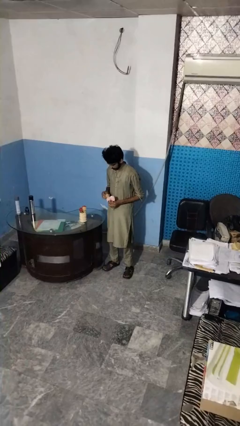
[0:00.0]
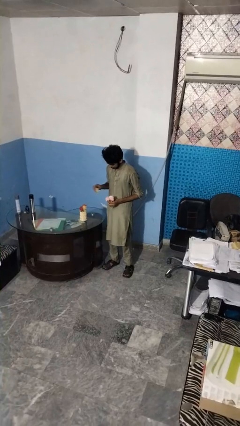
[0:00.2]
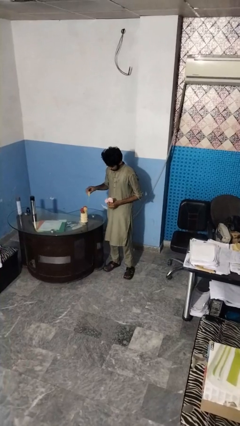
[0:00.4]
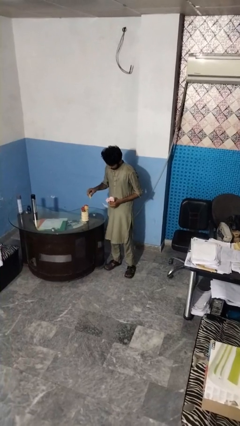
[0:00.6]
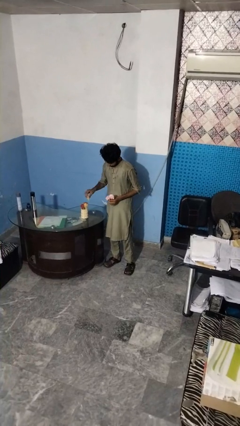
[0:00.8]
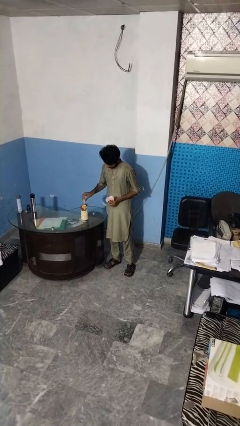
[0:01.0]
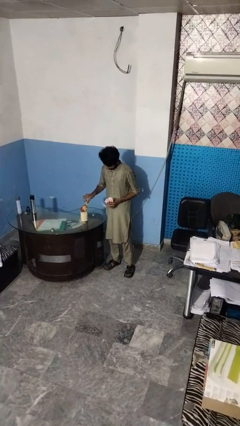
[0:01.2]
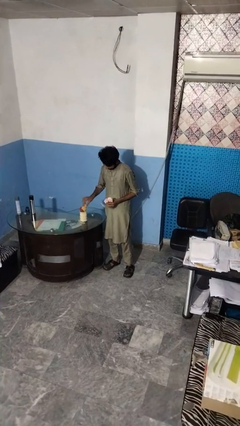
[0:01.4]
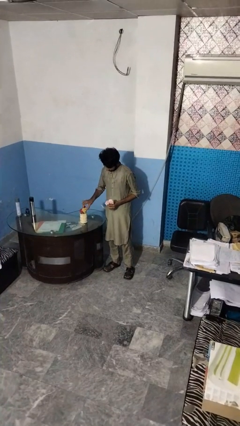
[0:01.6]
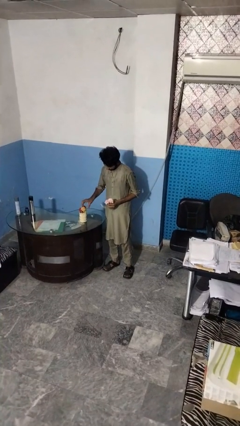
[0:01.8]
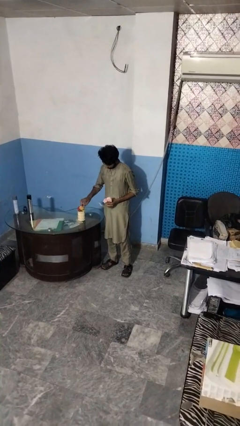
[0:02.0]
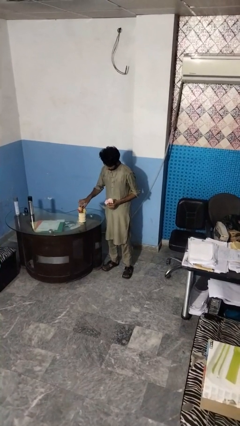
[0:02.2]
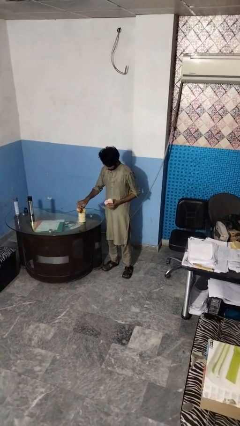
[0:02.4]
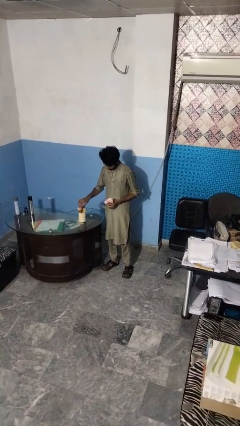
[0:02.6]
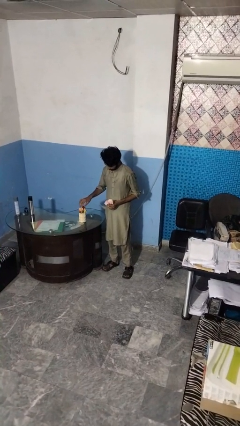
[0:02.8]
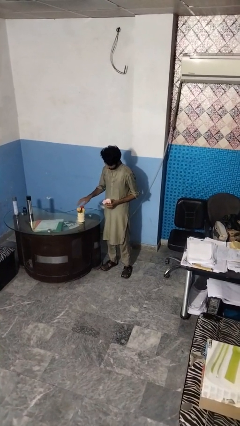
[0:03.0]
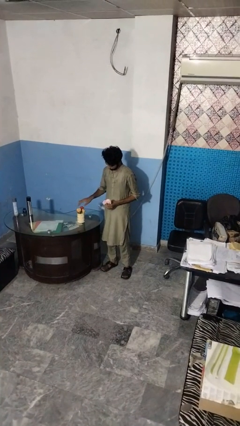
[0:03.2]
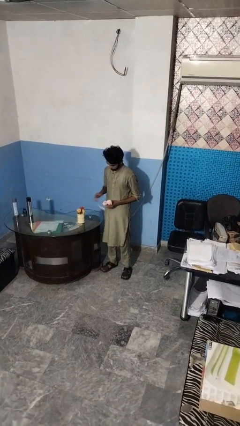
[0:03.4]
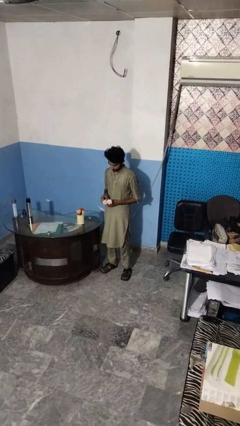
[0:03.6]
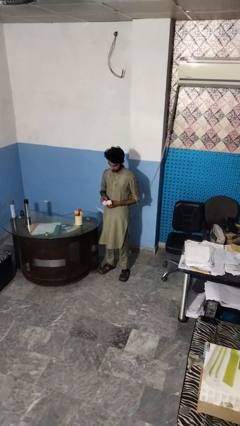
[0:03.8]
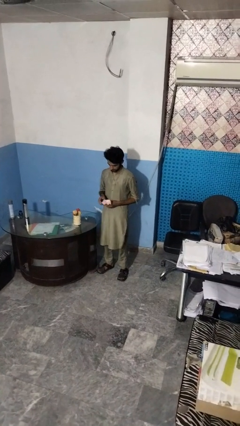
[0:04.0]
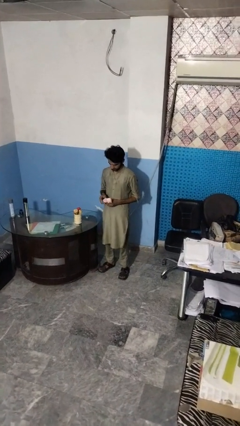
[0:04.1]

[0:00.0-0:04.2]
person arranges flowers in vase

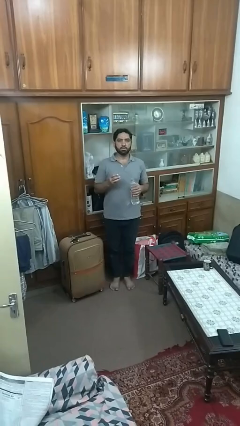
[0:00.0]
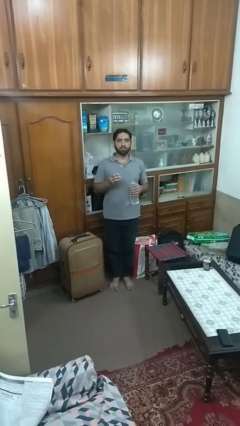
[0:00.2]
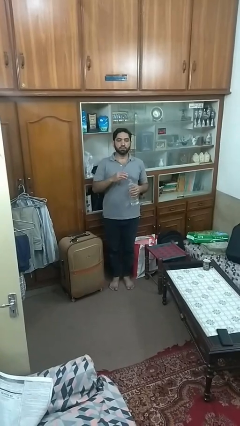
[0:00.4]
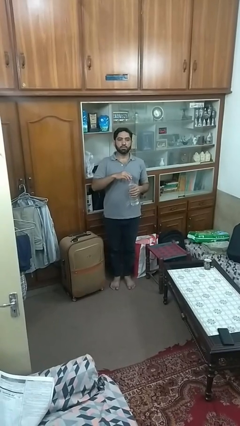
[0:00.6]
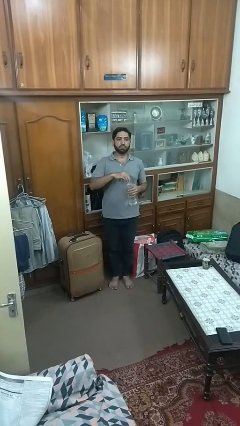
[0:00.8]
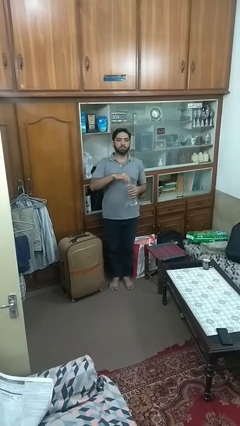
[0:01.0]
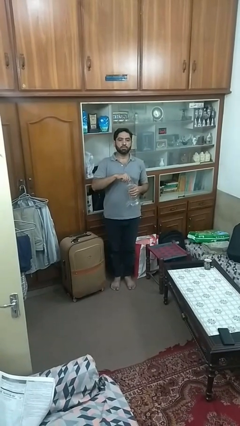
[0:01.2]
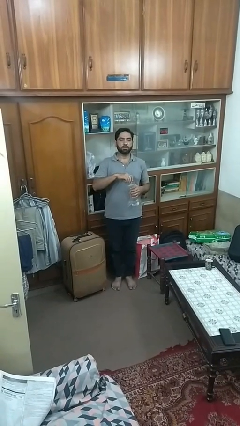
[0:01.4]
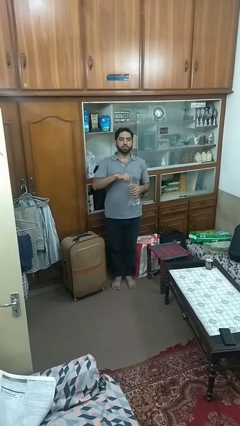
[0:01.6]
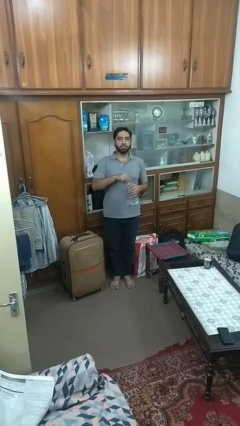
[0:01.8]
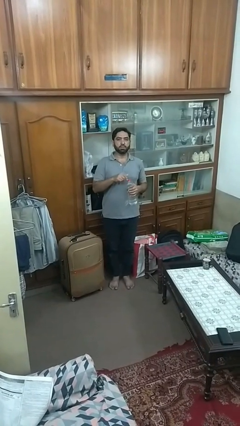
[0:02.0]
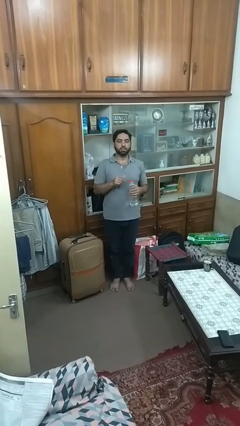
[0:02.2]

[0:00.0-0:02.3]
person screws lid to bottle

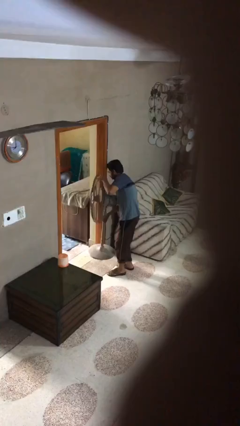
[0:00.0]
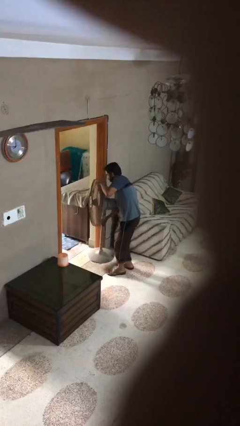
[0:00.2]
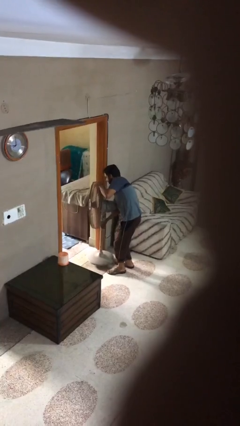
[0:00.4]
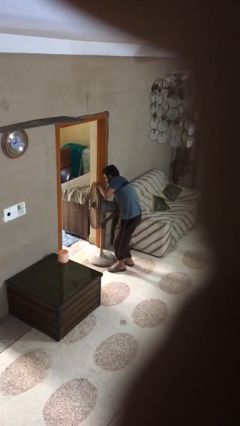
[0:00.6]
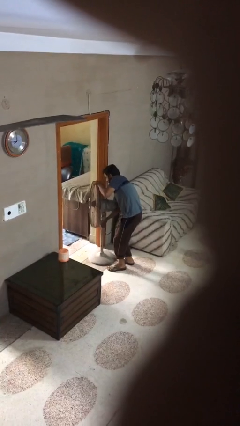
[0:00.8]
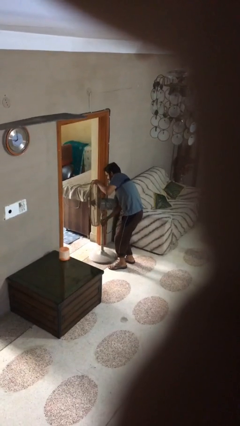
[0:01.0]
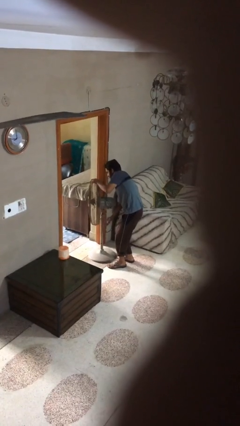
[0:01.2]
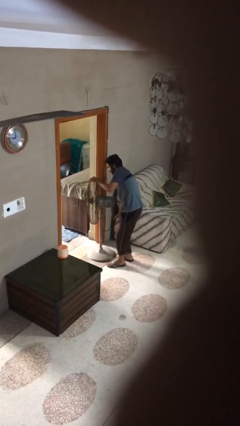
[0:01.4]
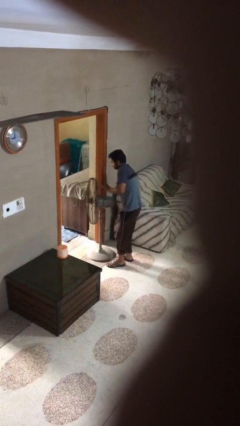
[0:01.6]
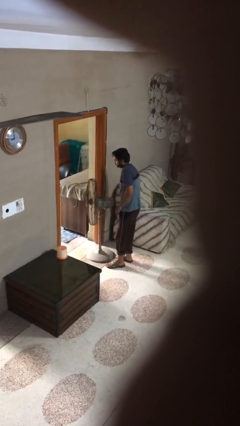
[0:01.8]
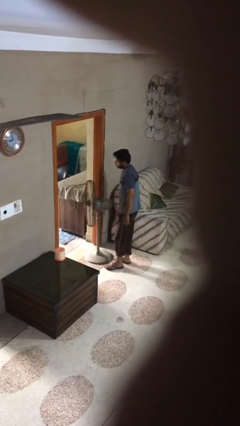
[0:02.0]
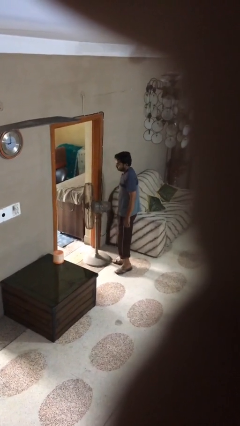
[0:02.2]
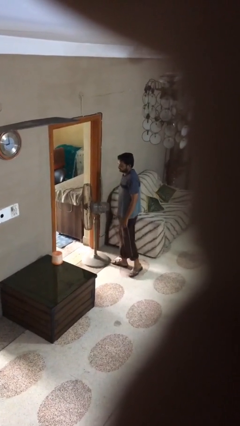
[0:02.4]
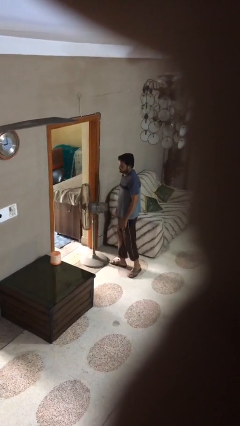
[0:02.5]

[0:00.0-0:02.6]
person puts down object on floor

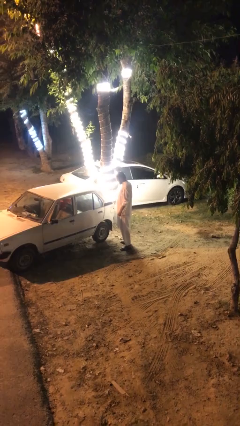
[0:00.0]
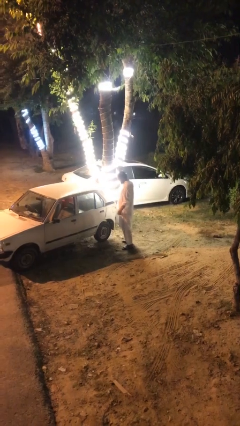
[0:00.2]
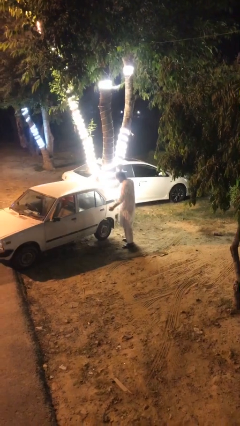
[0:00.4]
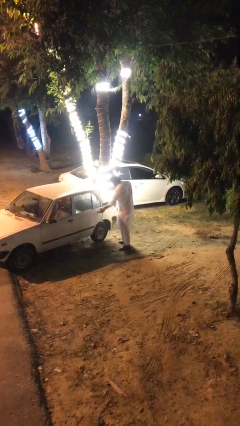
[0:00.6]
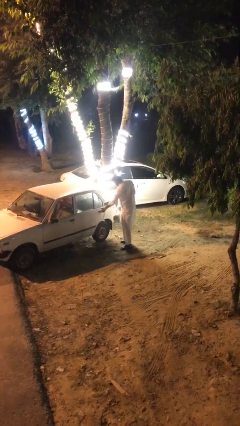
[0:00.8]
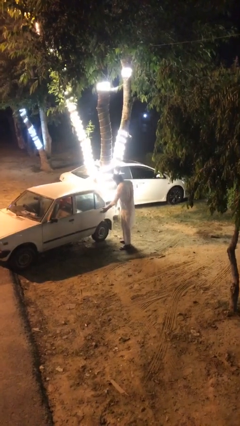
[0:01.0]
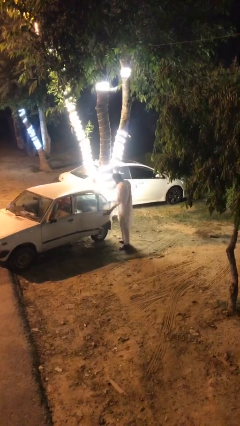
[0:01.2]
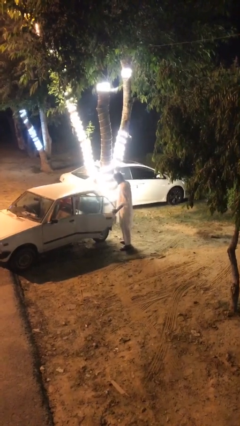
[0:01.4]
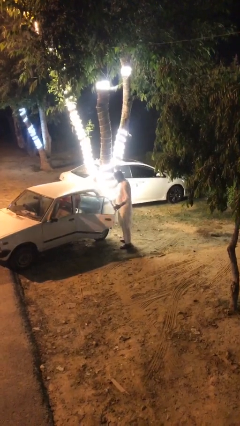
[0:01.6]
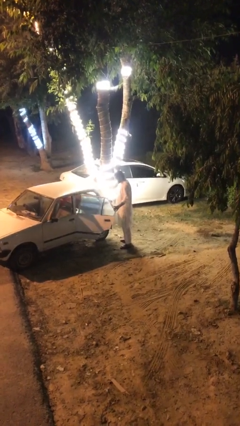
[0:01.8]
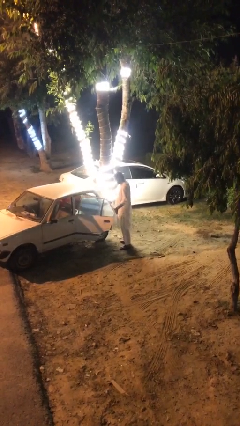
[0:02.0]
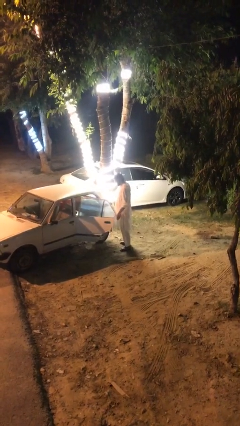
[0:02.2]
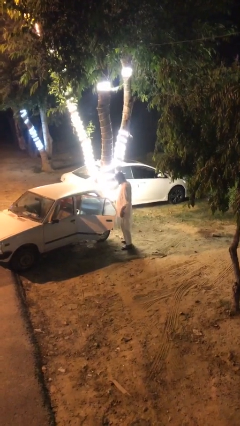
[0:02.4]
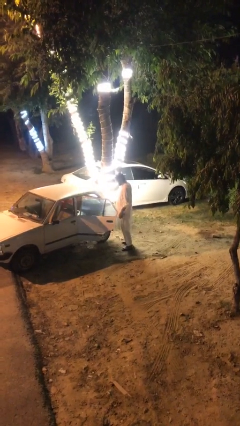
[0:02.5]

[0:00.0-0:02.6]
person opens car door

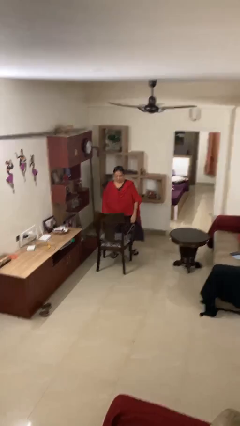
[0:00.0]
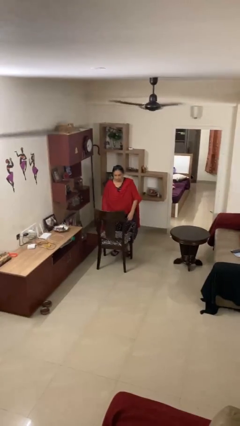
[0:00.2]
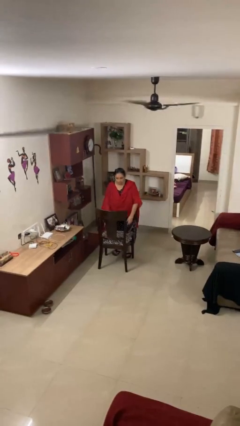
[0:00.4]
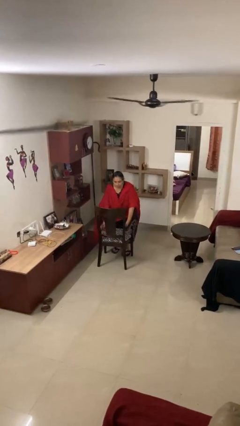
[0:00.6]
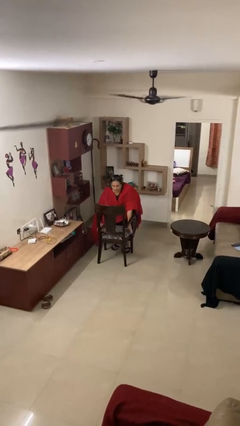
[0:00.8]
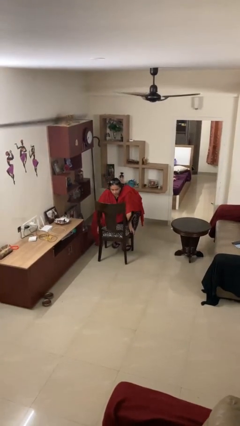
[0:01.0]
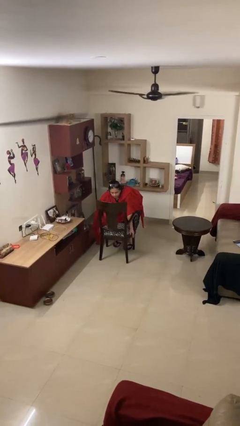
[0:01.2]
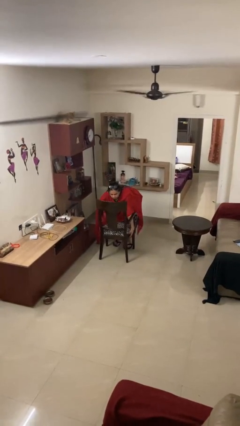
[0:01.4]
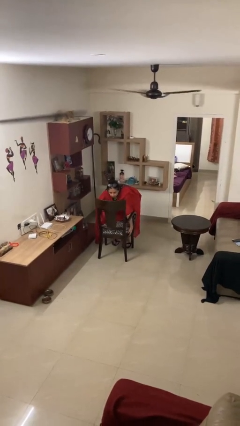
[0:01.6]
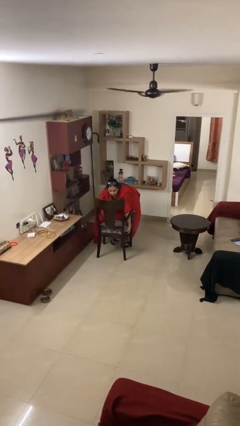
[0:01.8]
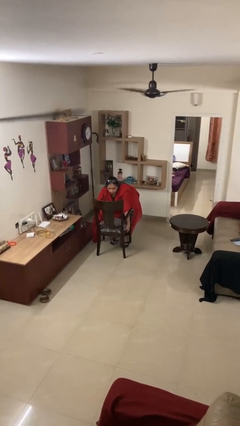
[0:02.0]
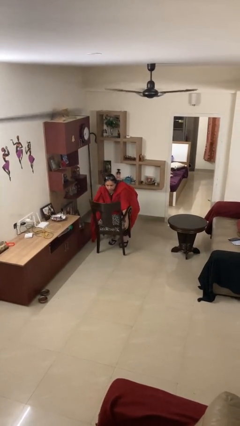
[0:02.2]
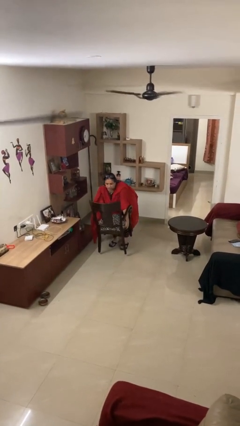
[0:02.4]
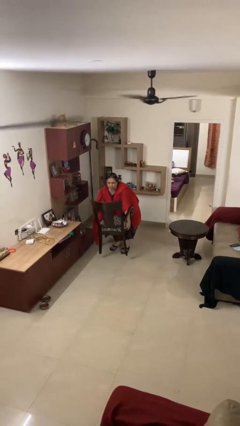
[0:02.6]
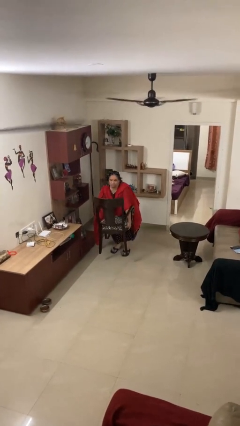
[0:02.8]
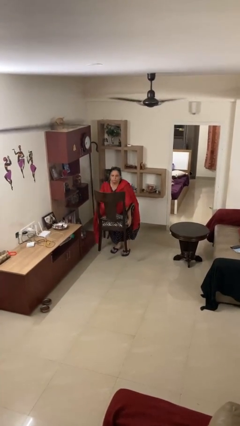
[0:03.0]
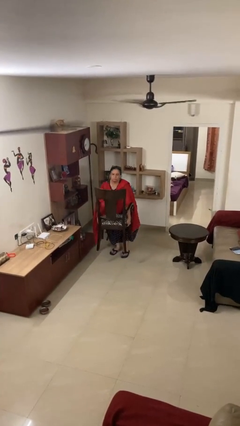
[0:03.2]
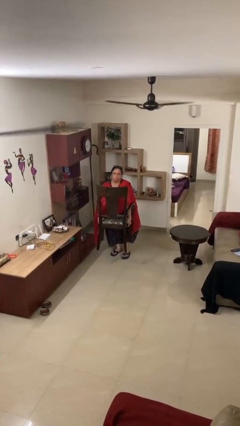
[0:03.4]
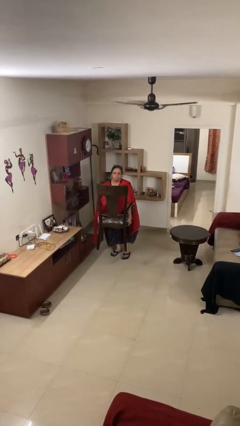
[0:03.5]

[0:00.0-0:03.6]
person picks up object from floor

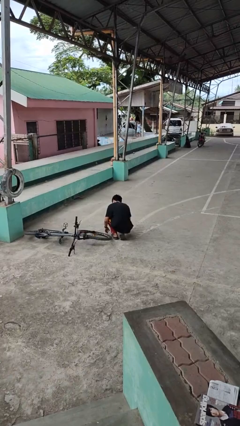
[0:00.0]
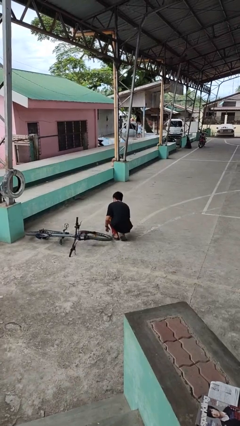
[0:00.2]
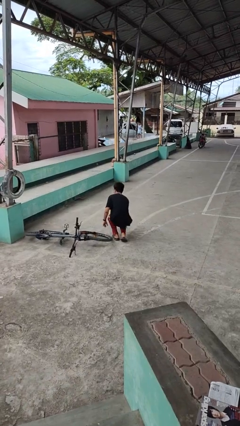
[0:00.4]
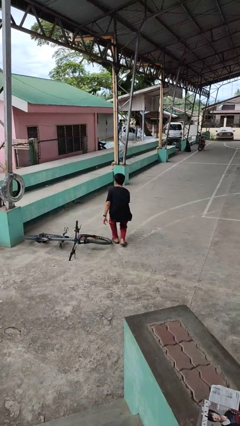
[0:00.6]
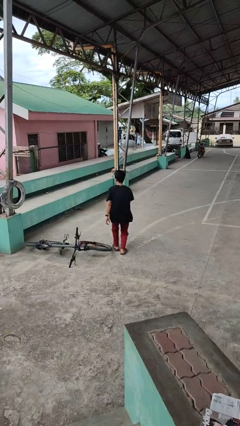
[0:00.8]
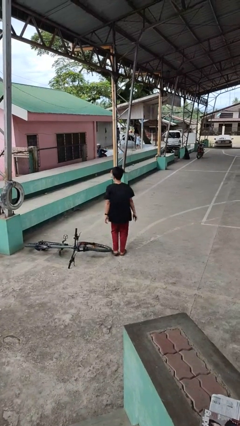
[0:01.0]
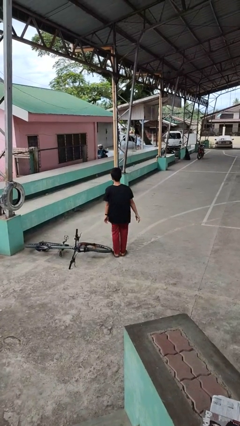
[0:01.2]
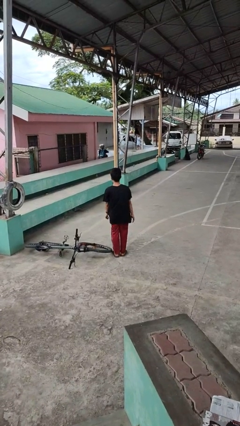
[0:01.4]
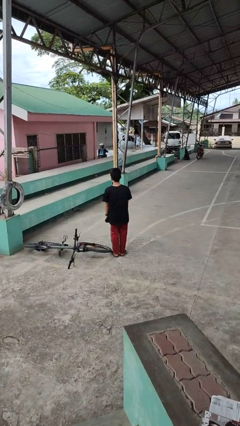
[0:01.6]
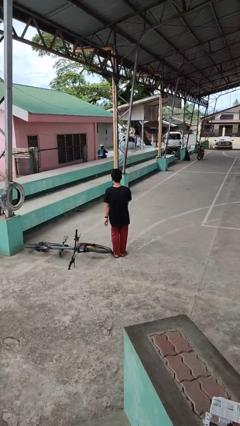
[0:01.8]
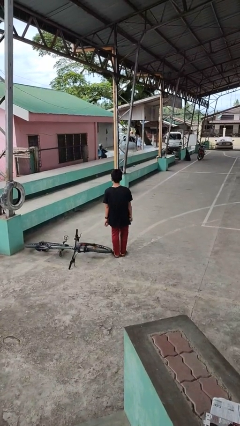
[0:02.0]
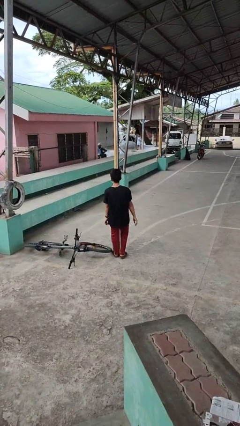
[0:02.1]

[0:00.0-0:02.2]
person stands up from floor
